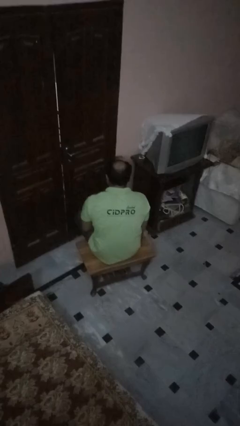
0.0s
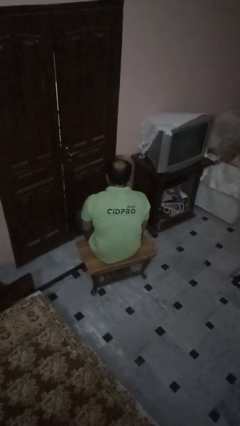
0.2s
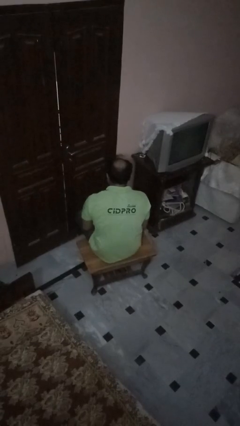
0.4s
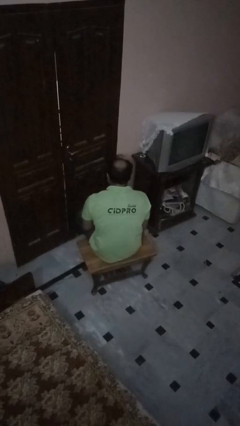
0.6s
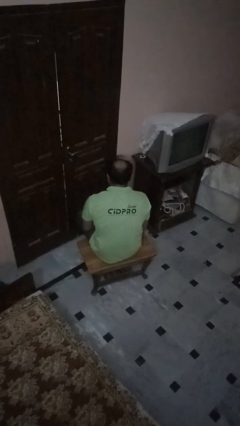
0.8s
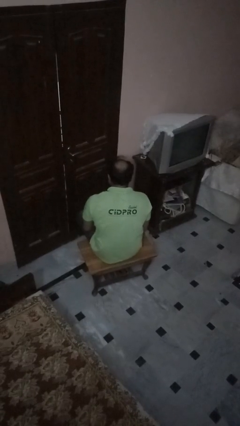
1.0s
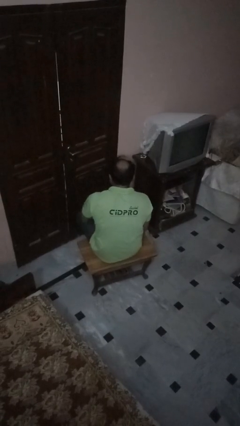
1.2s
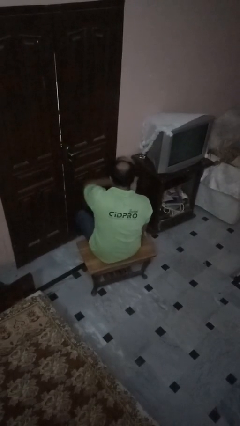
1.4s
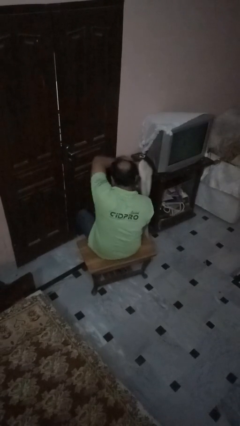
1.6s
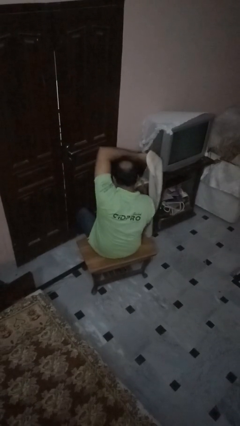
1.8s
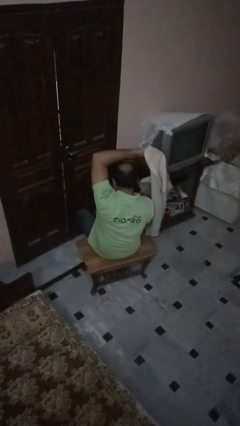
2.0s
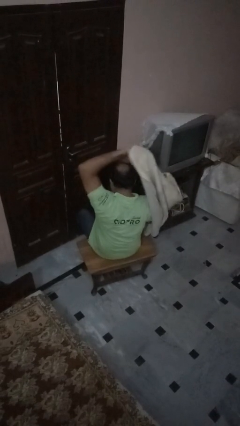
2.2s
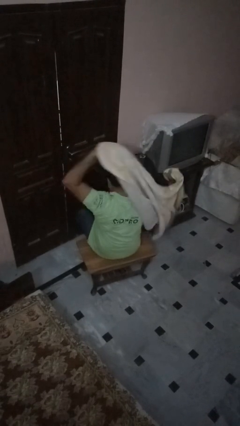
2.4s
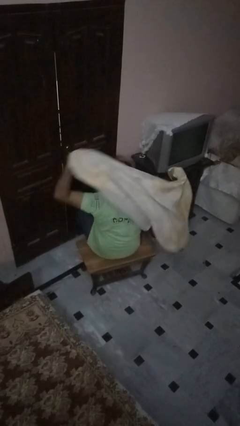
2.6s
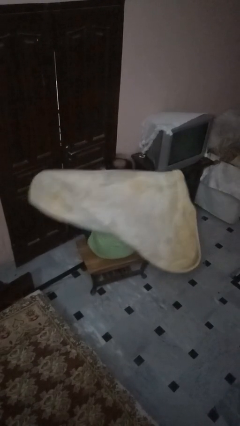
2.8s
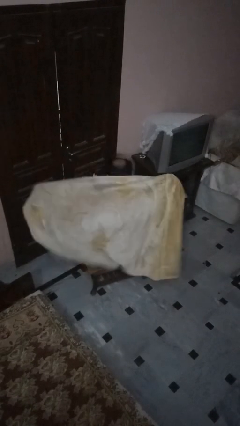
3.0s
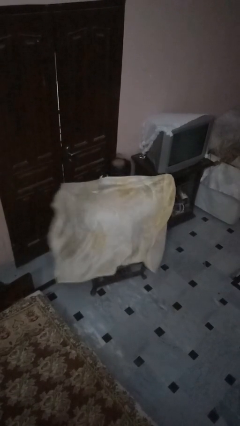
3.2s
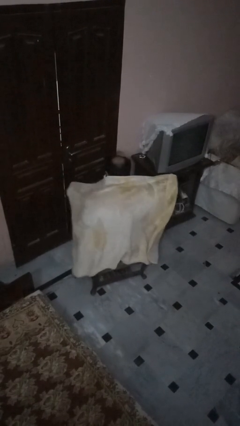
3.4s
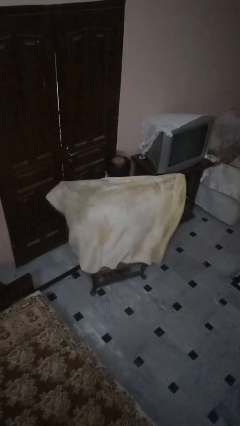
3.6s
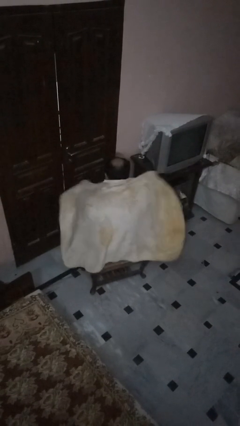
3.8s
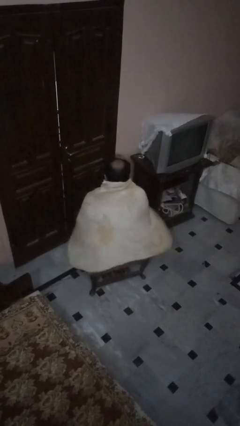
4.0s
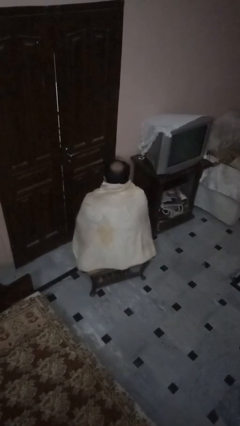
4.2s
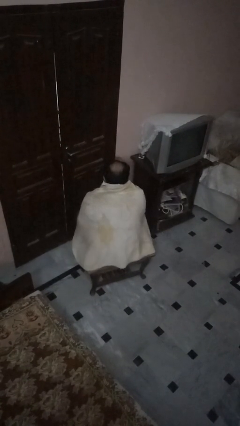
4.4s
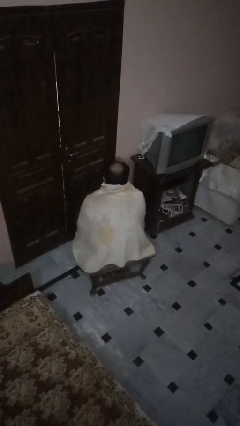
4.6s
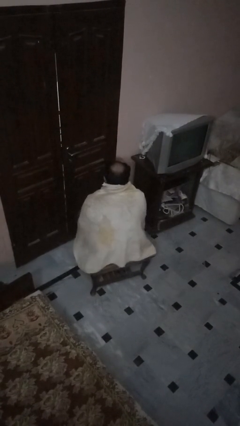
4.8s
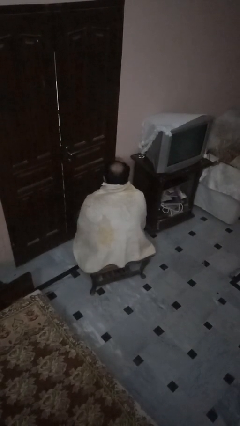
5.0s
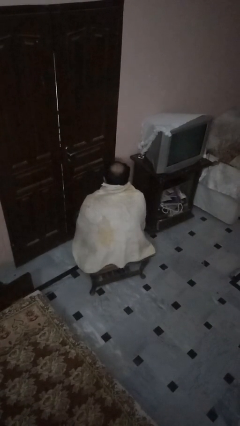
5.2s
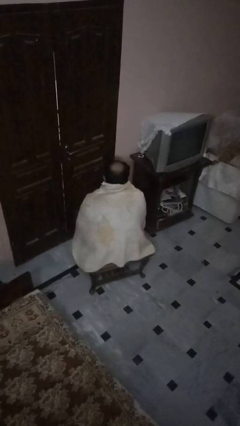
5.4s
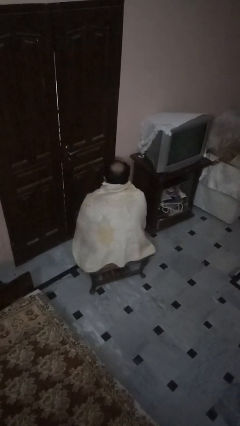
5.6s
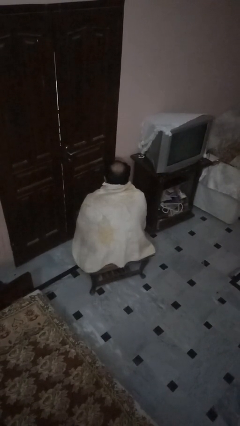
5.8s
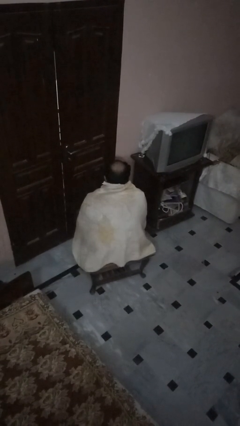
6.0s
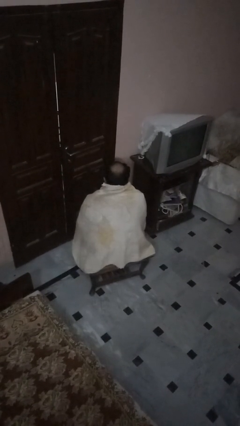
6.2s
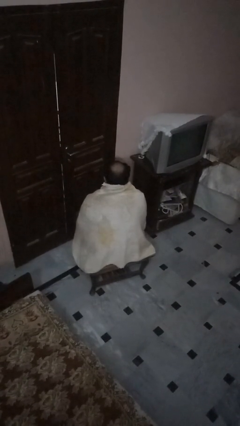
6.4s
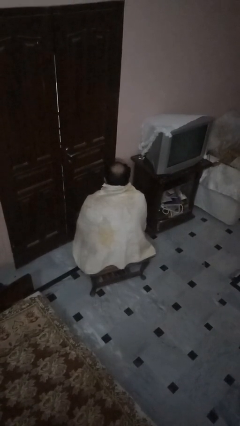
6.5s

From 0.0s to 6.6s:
person covers with blanket

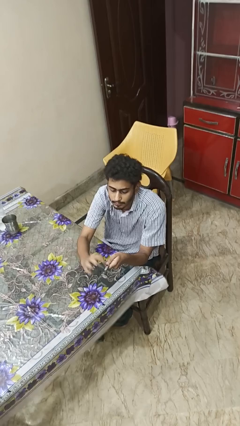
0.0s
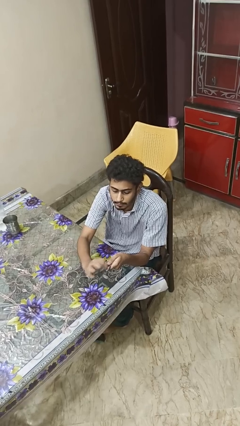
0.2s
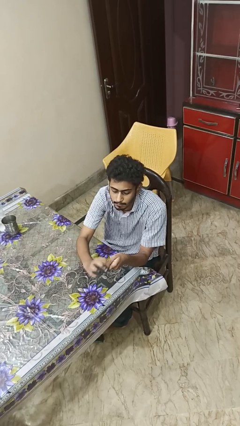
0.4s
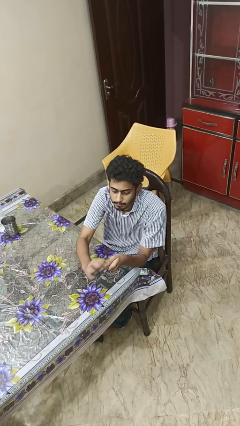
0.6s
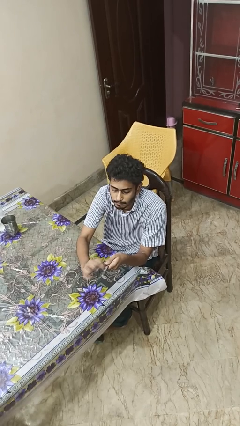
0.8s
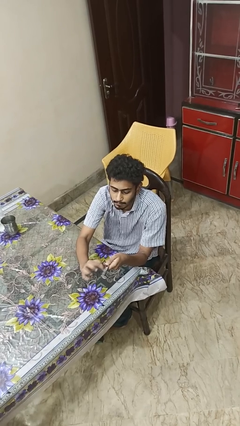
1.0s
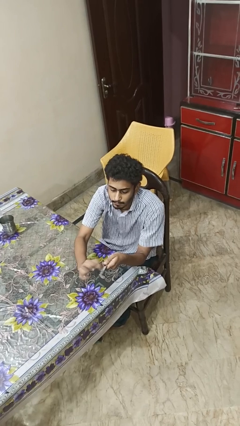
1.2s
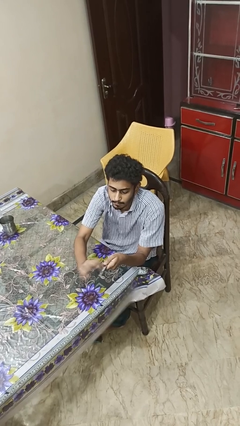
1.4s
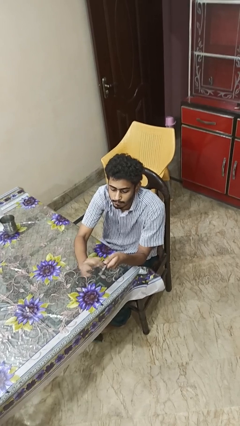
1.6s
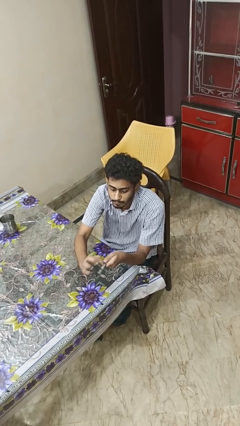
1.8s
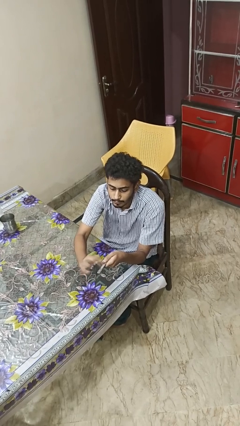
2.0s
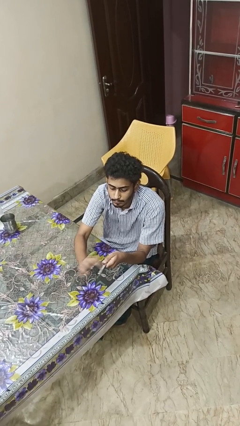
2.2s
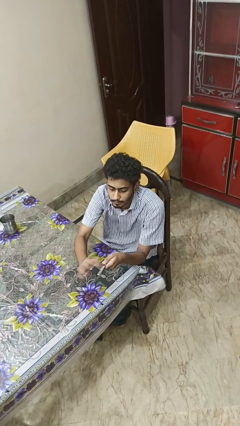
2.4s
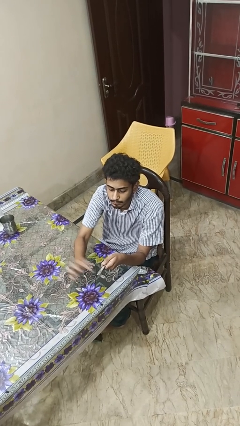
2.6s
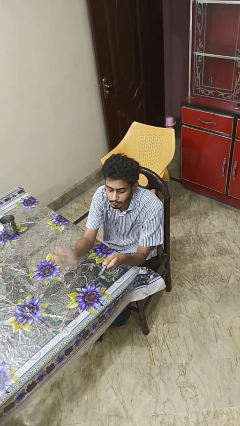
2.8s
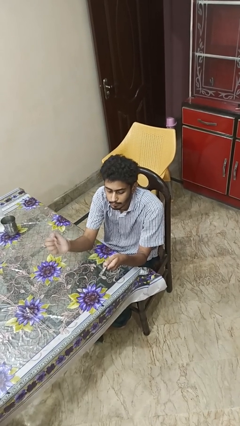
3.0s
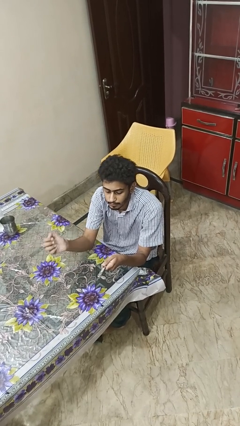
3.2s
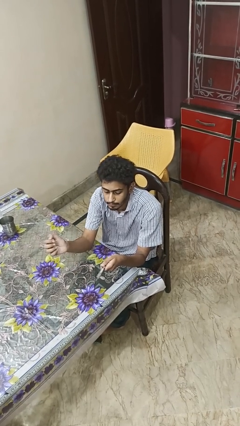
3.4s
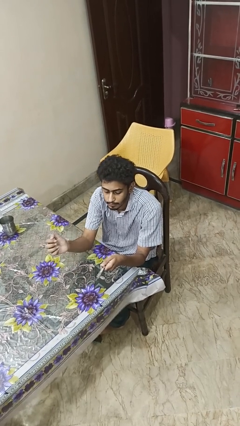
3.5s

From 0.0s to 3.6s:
person files fingernails

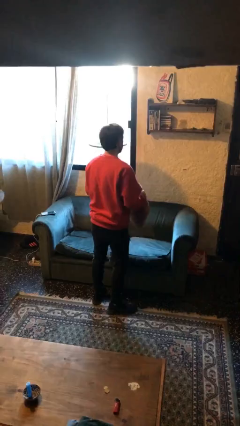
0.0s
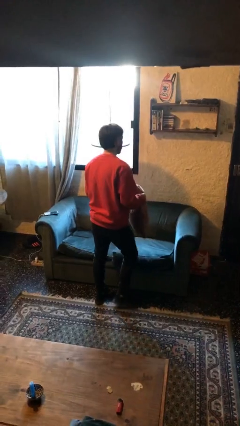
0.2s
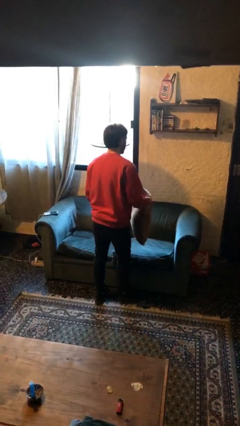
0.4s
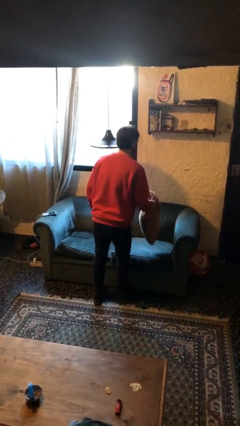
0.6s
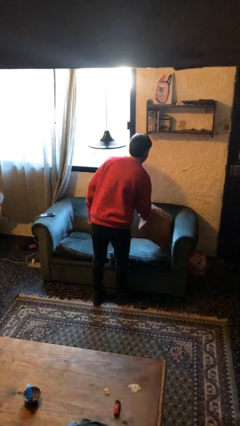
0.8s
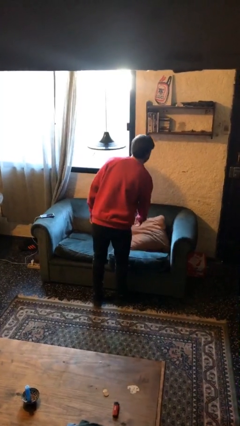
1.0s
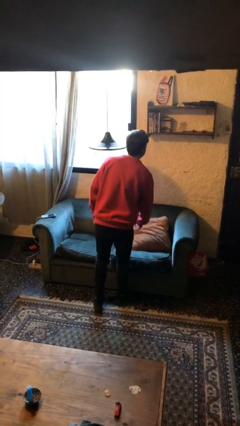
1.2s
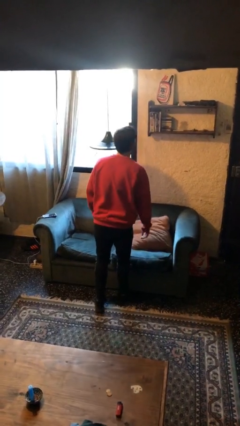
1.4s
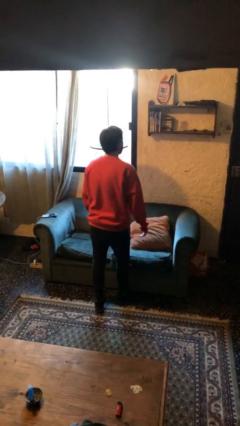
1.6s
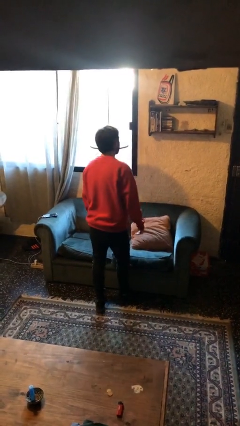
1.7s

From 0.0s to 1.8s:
person puts down object on couch

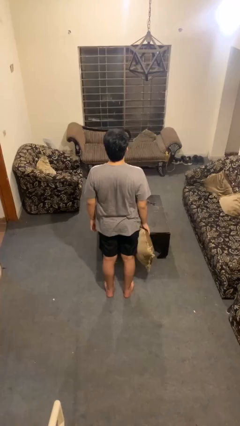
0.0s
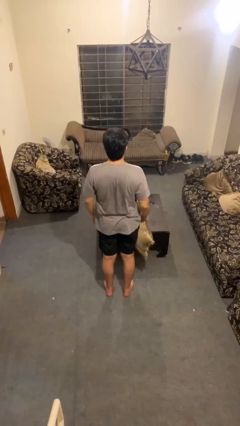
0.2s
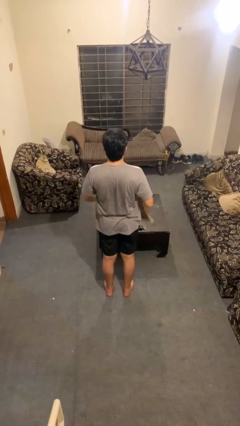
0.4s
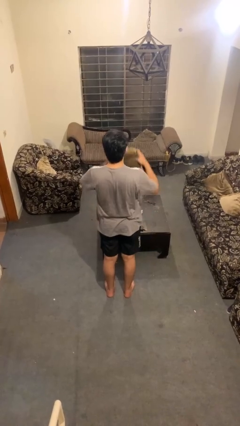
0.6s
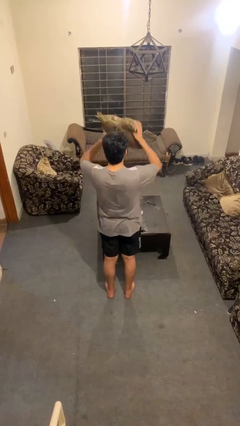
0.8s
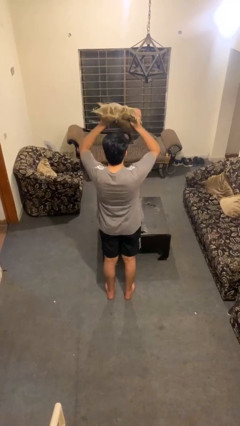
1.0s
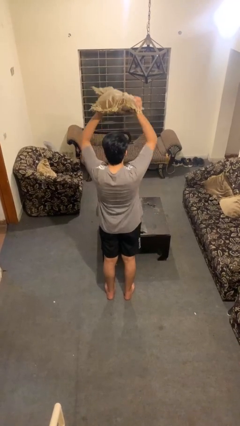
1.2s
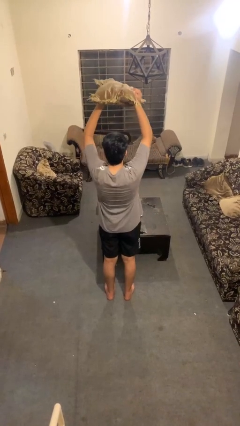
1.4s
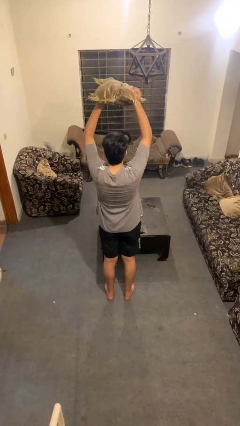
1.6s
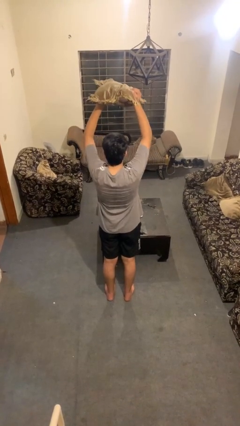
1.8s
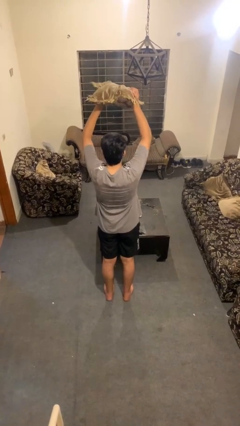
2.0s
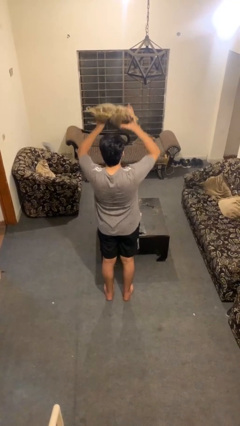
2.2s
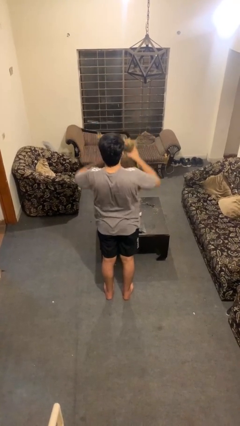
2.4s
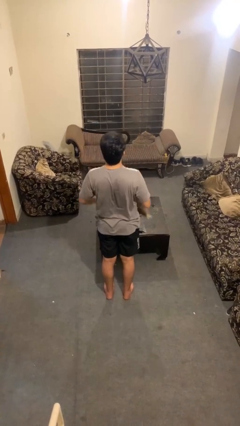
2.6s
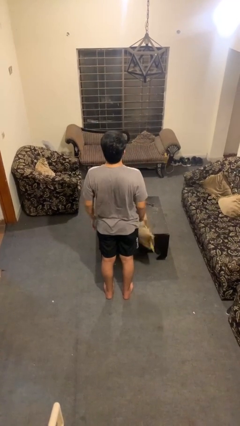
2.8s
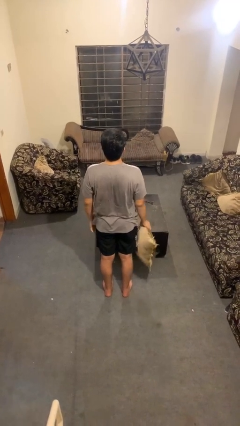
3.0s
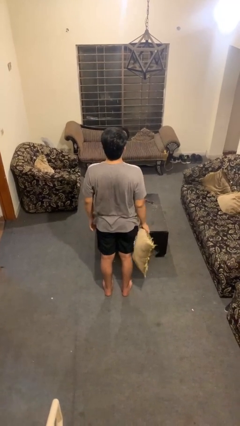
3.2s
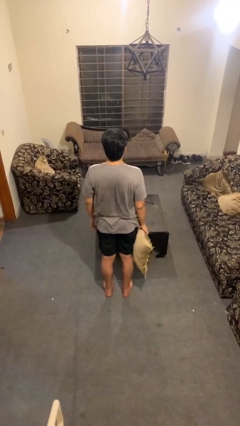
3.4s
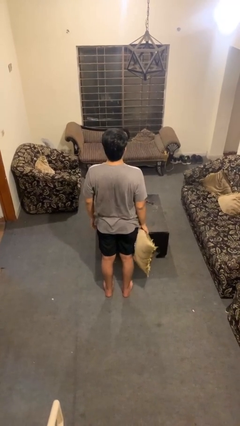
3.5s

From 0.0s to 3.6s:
person holds object above head

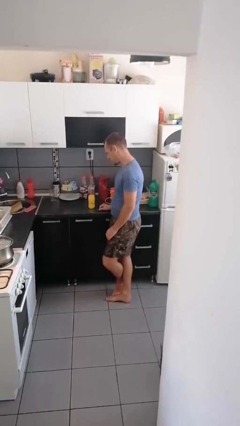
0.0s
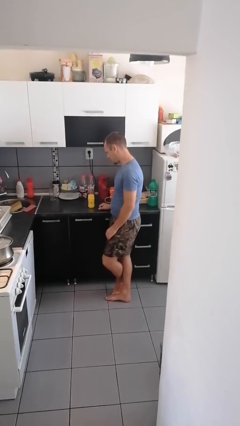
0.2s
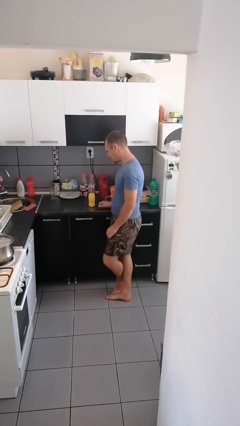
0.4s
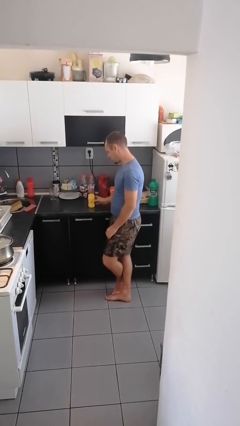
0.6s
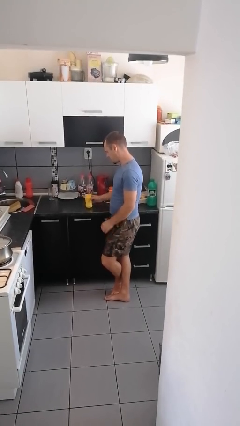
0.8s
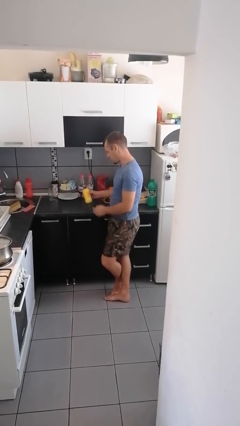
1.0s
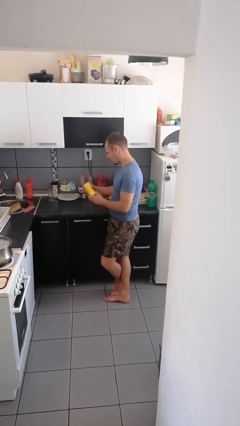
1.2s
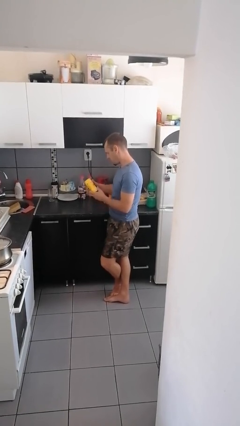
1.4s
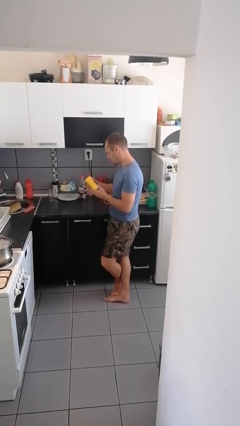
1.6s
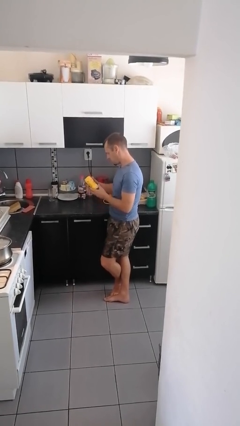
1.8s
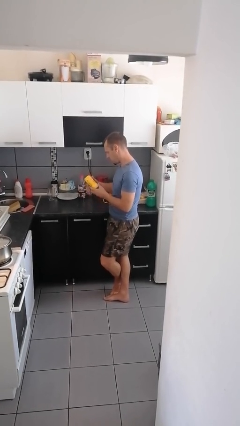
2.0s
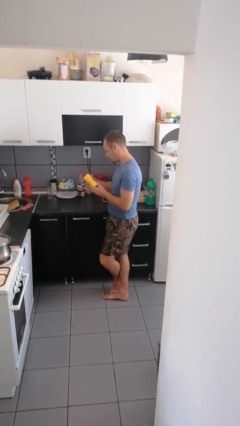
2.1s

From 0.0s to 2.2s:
person picks up object from countertop
